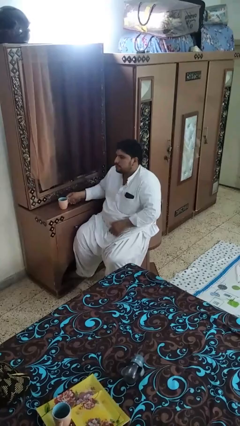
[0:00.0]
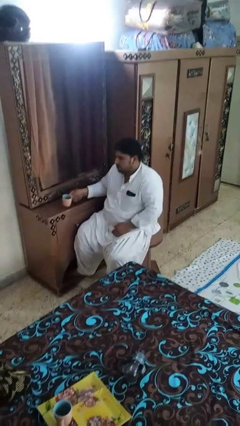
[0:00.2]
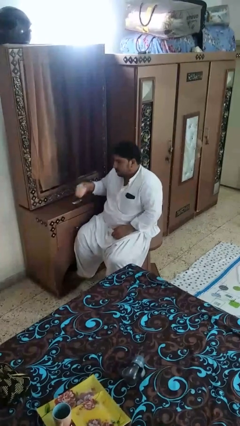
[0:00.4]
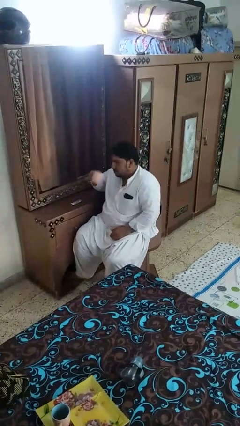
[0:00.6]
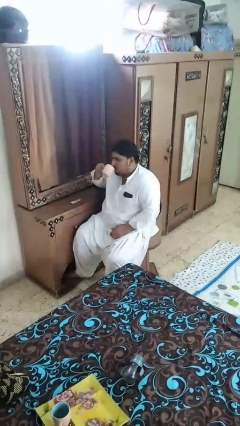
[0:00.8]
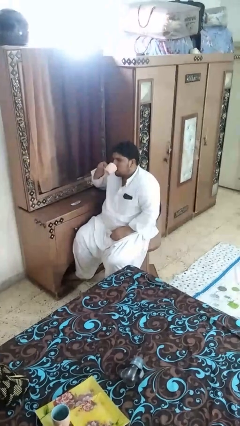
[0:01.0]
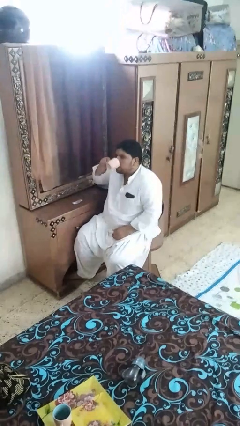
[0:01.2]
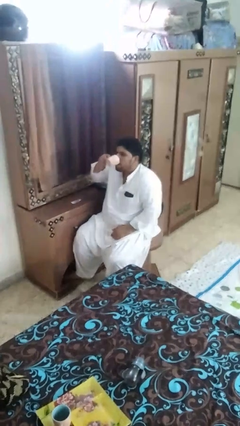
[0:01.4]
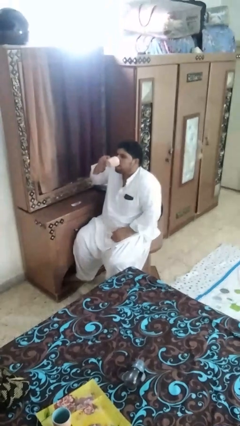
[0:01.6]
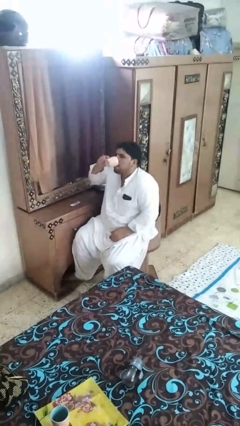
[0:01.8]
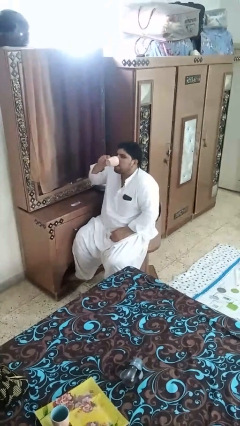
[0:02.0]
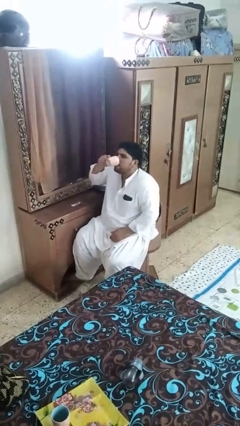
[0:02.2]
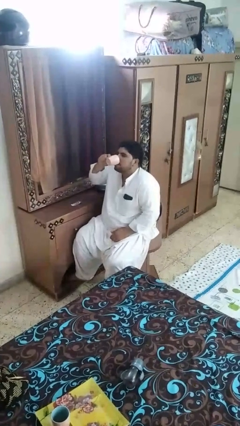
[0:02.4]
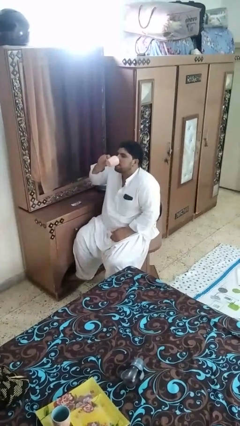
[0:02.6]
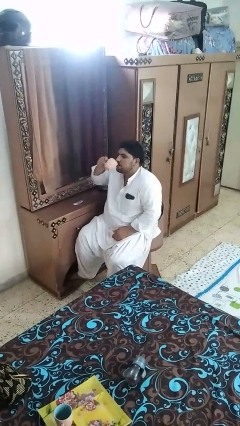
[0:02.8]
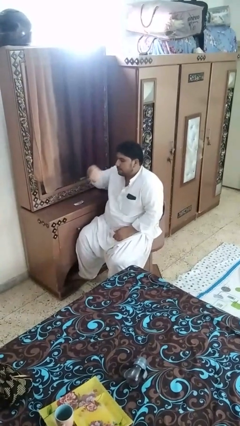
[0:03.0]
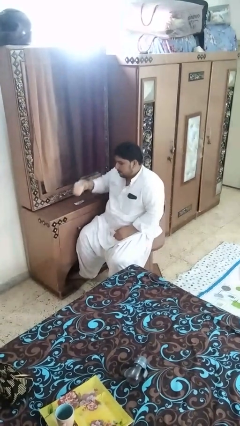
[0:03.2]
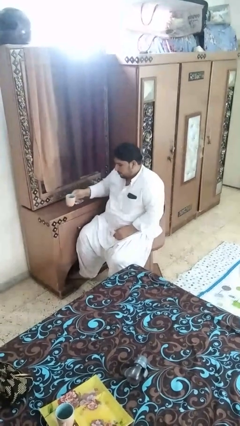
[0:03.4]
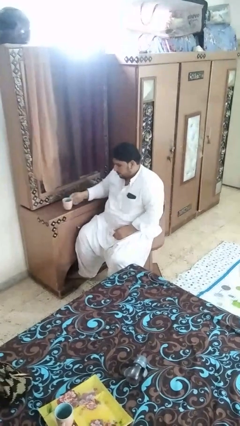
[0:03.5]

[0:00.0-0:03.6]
person drinks from cup

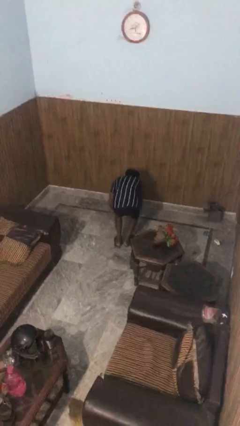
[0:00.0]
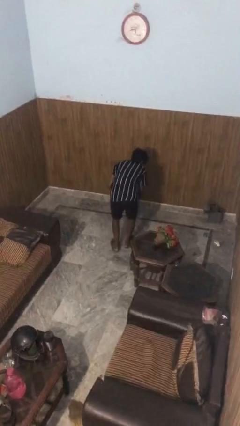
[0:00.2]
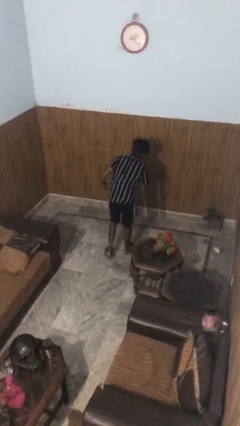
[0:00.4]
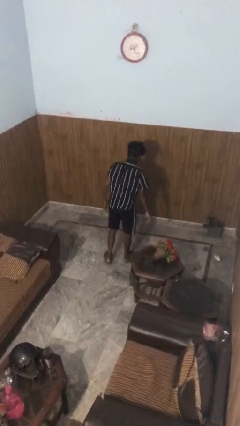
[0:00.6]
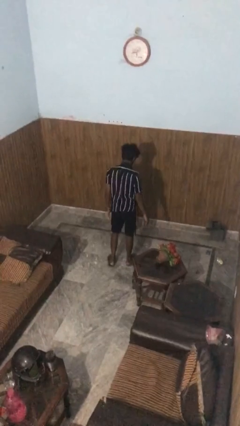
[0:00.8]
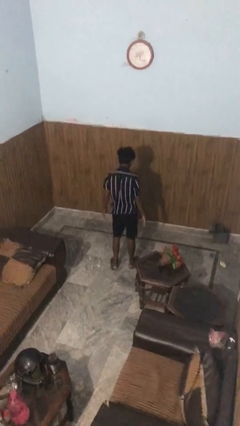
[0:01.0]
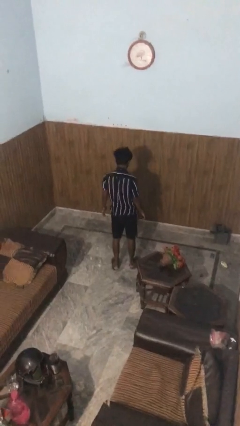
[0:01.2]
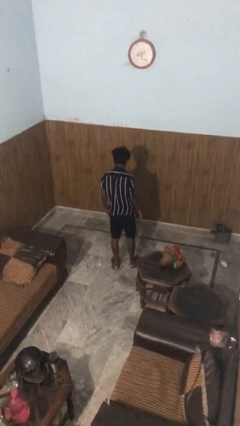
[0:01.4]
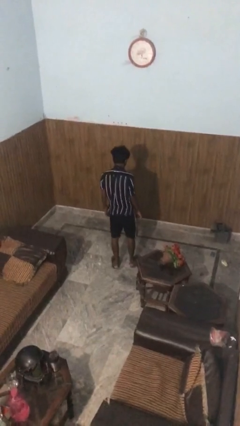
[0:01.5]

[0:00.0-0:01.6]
person stands up from floor

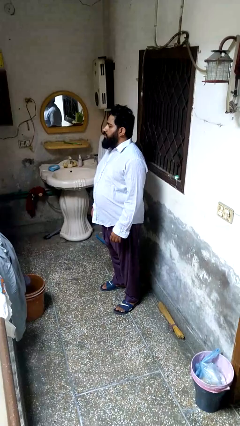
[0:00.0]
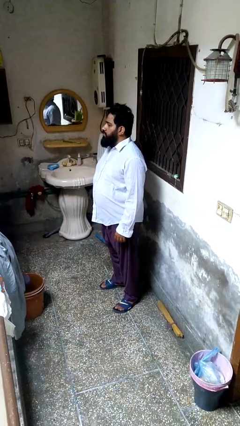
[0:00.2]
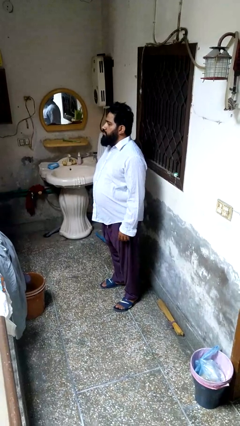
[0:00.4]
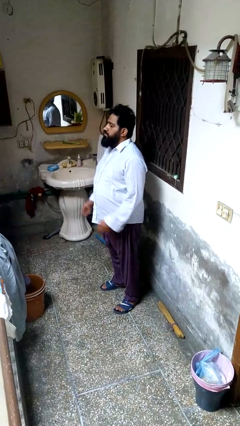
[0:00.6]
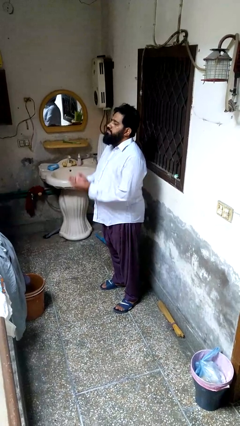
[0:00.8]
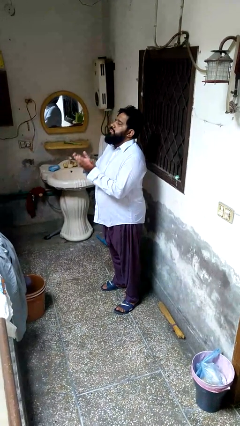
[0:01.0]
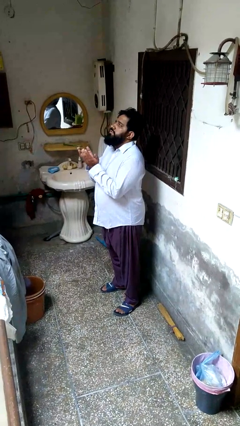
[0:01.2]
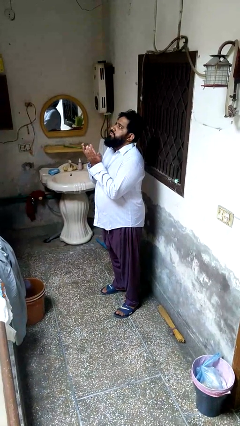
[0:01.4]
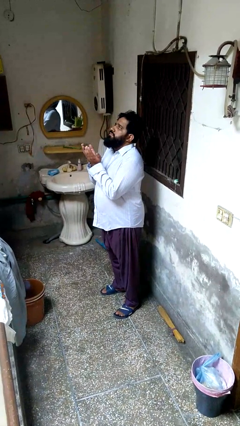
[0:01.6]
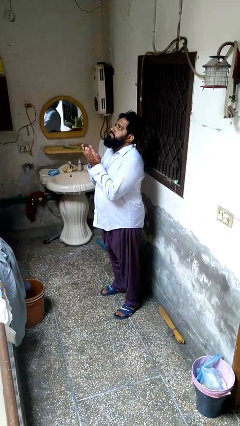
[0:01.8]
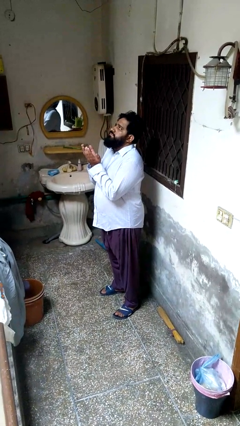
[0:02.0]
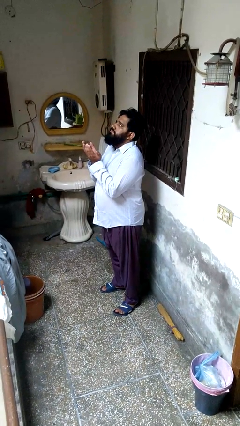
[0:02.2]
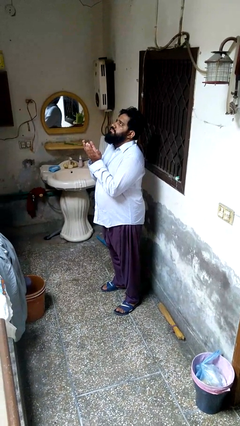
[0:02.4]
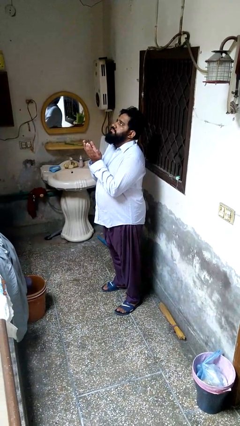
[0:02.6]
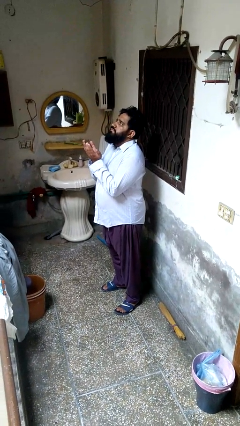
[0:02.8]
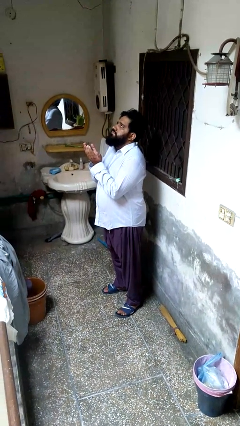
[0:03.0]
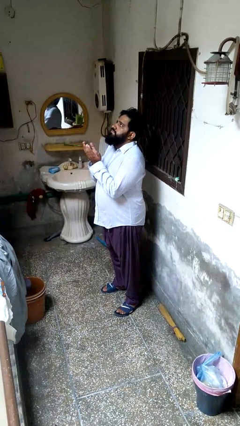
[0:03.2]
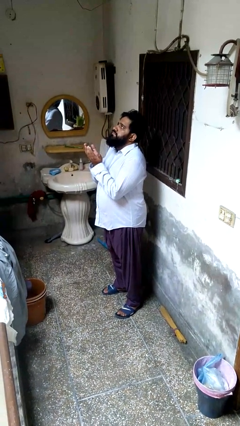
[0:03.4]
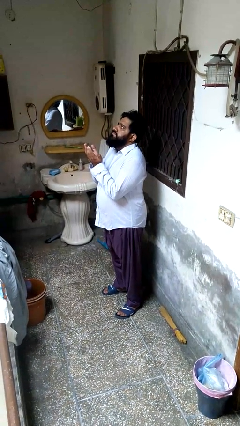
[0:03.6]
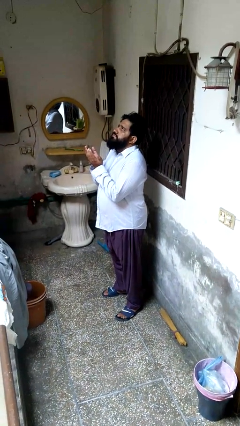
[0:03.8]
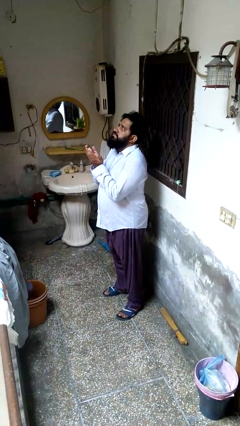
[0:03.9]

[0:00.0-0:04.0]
person prays

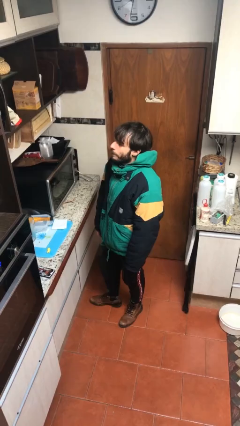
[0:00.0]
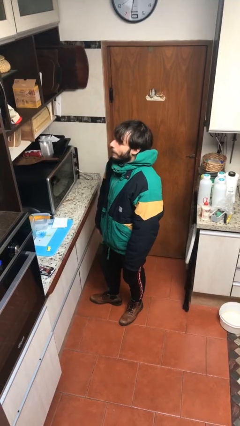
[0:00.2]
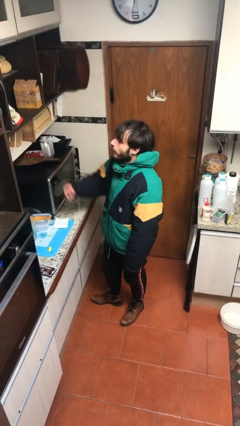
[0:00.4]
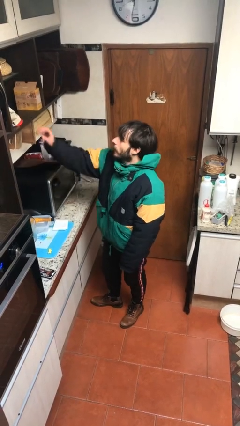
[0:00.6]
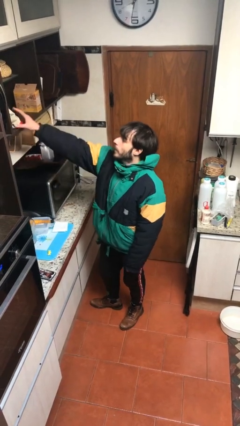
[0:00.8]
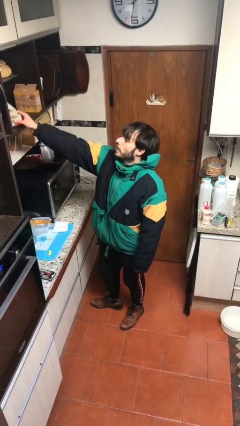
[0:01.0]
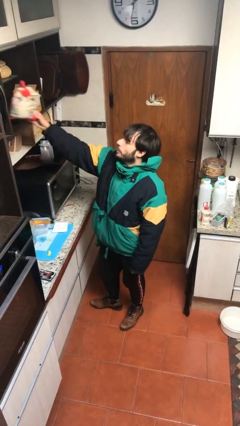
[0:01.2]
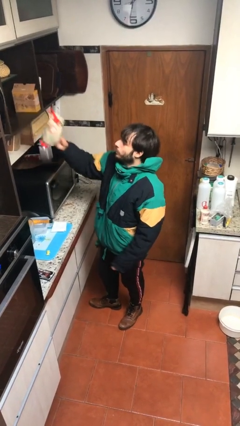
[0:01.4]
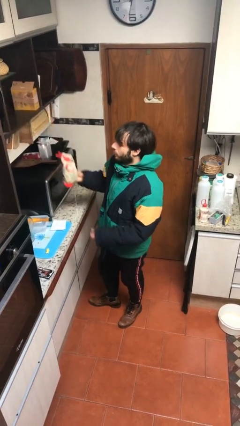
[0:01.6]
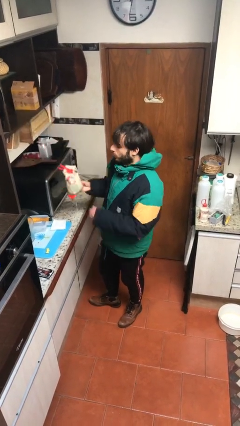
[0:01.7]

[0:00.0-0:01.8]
person picks up object from cabinet

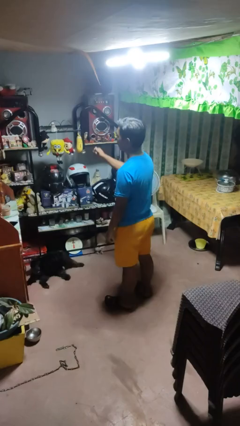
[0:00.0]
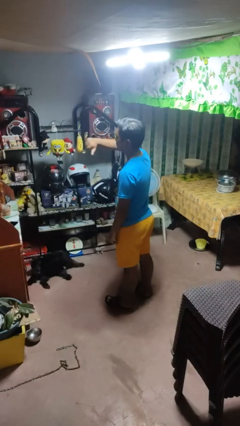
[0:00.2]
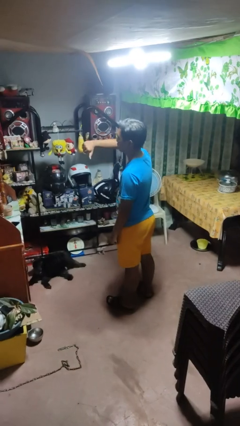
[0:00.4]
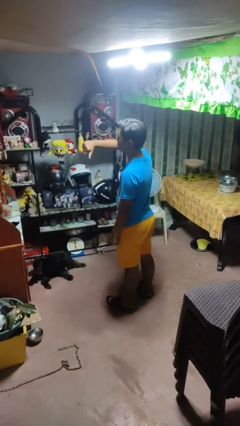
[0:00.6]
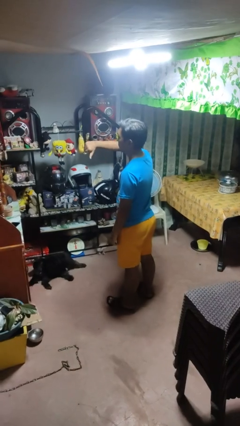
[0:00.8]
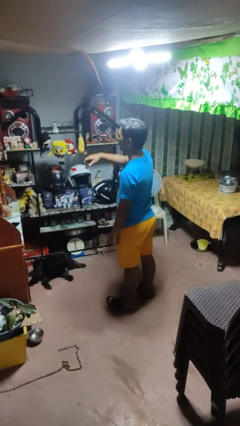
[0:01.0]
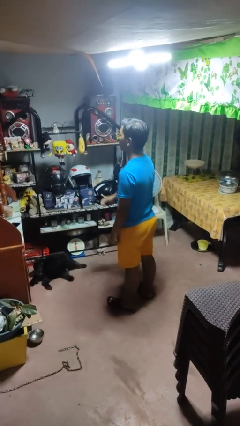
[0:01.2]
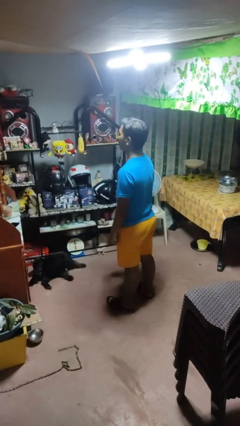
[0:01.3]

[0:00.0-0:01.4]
person gestures thumbs down

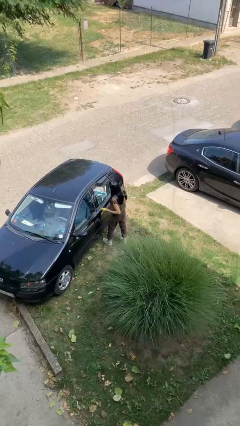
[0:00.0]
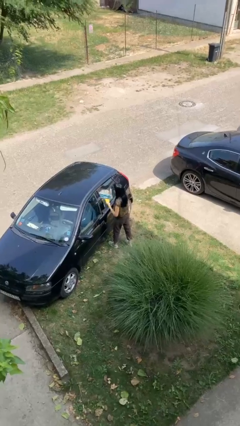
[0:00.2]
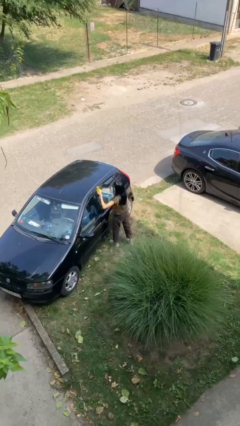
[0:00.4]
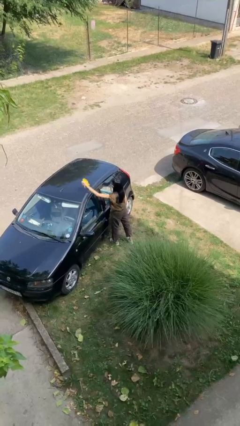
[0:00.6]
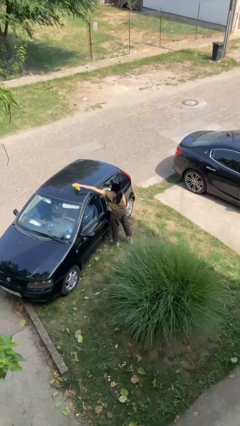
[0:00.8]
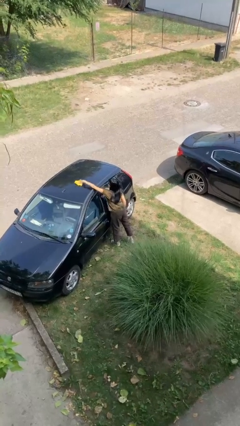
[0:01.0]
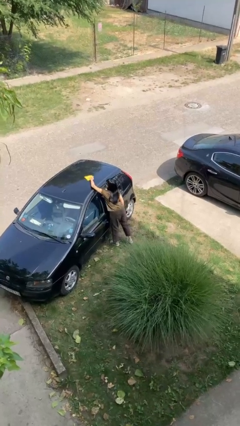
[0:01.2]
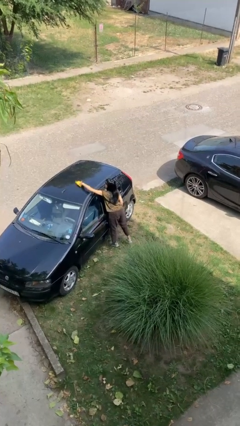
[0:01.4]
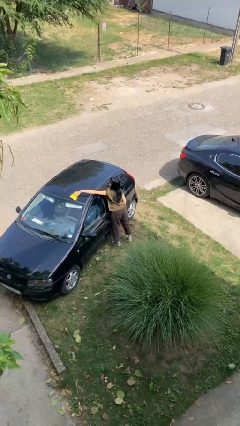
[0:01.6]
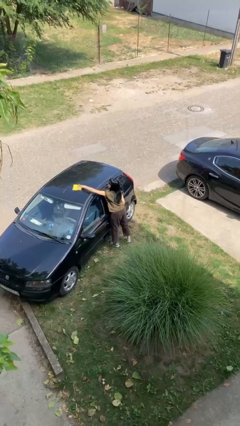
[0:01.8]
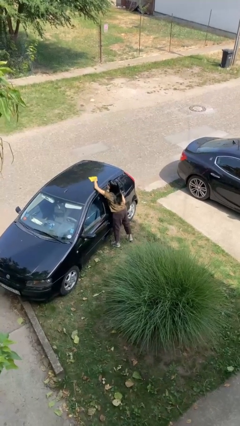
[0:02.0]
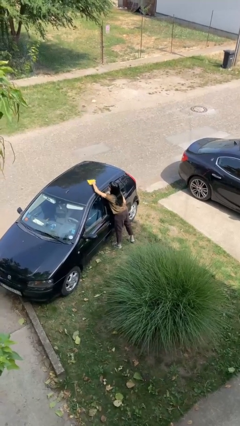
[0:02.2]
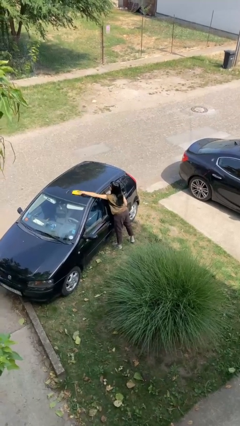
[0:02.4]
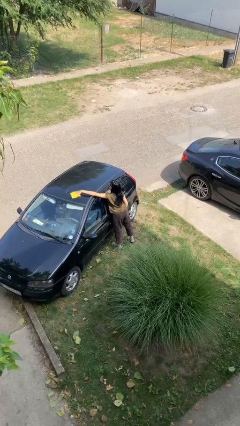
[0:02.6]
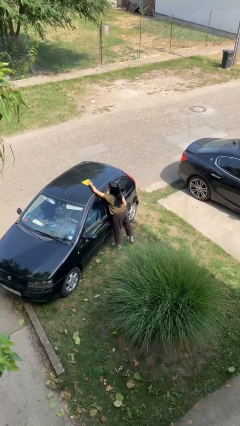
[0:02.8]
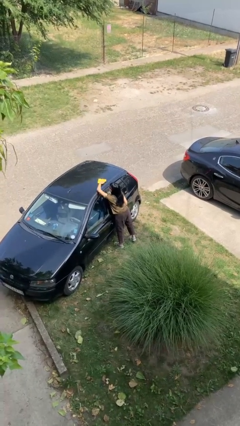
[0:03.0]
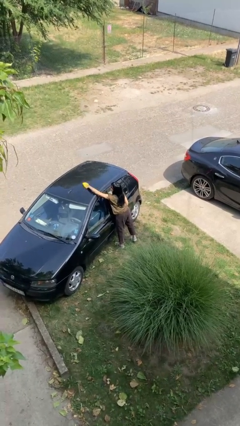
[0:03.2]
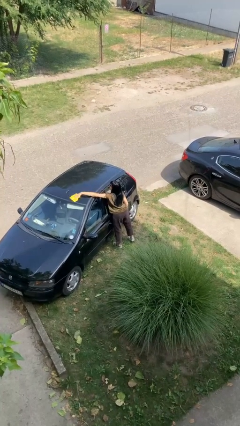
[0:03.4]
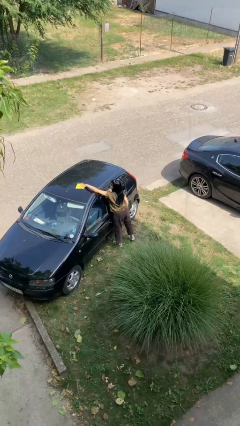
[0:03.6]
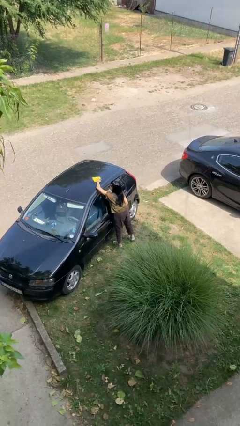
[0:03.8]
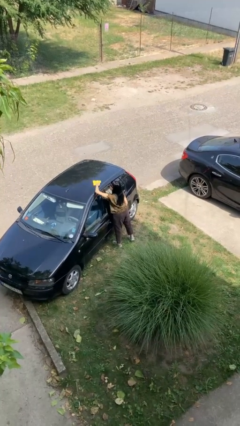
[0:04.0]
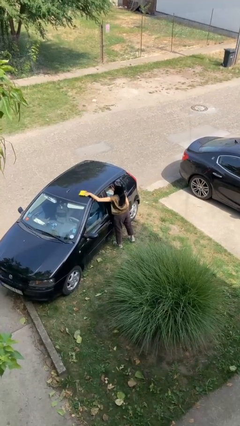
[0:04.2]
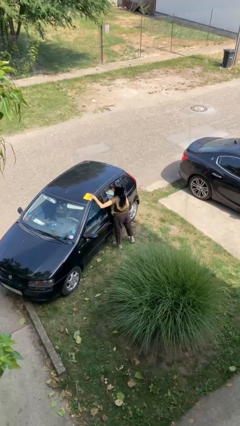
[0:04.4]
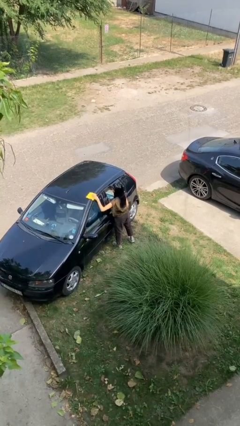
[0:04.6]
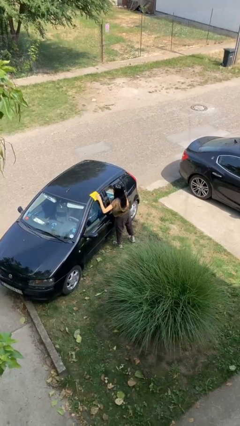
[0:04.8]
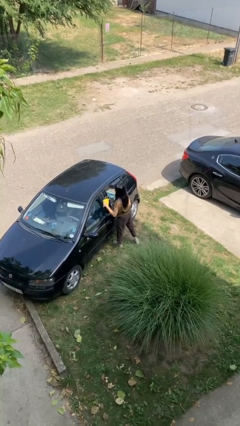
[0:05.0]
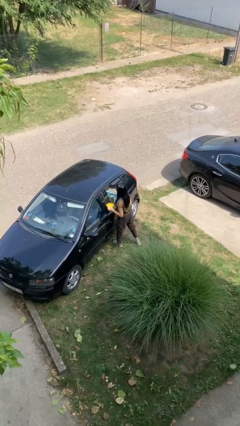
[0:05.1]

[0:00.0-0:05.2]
person polishes car with rag
